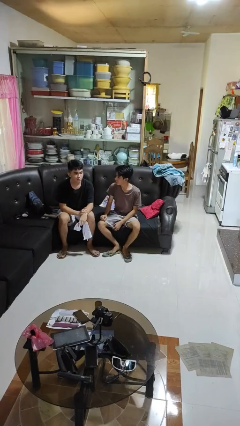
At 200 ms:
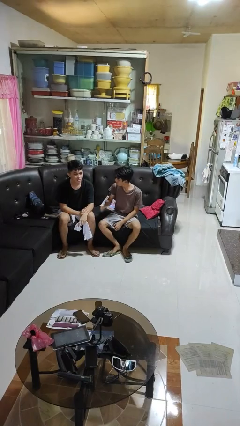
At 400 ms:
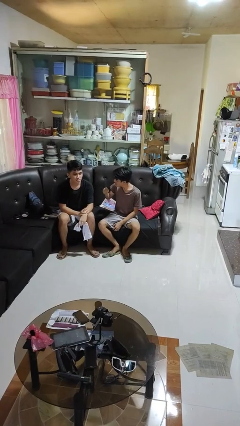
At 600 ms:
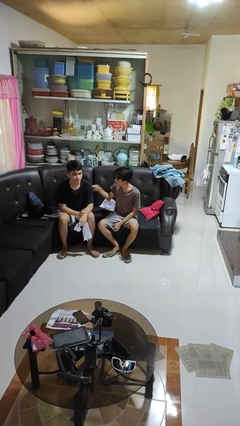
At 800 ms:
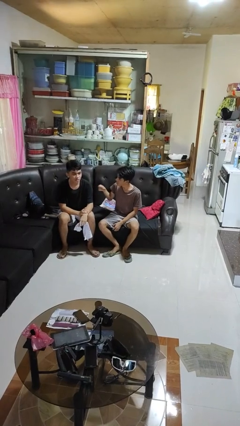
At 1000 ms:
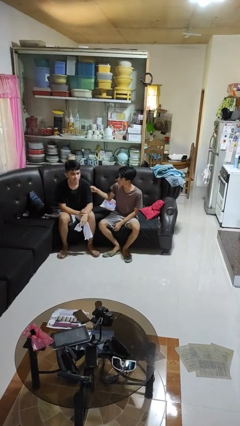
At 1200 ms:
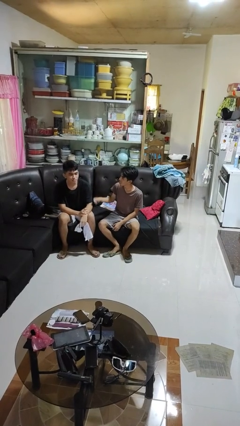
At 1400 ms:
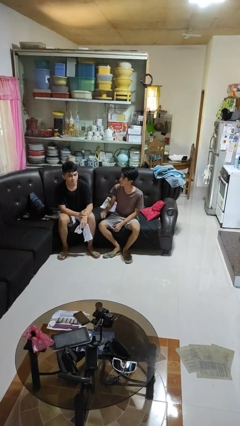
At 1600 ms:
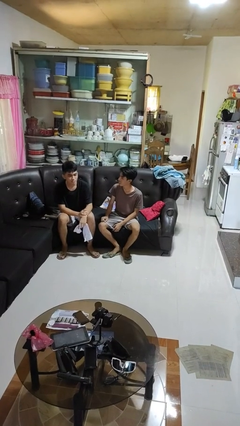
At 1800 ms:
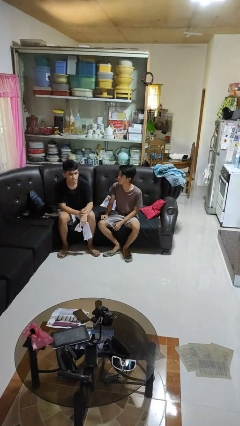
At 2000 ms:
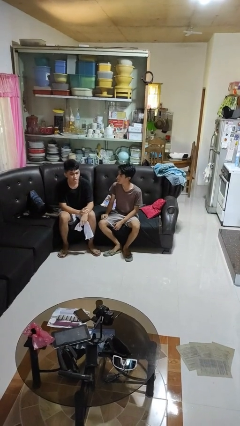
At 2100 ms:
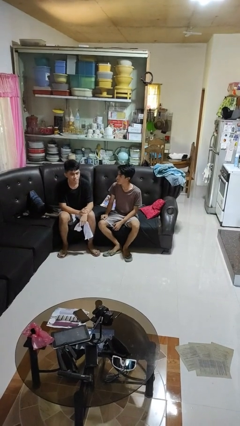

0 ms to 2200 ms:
person pounds shoulders of person

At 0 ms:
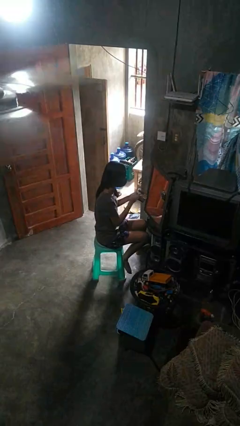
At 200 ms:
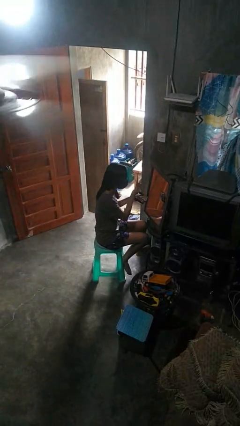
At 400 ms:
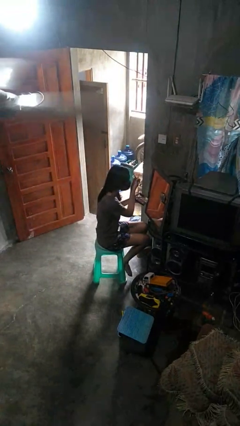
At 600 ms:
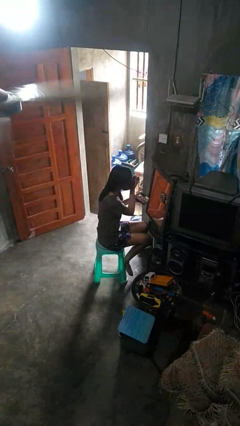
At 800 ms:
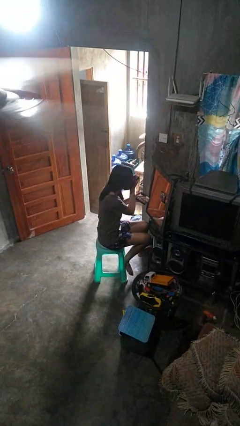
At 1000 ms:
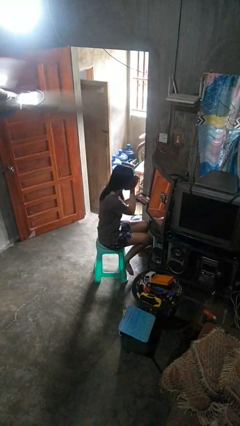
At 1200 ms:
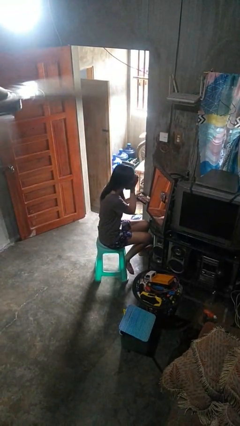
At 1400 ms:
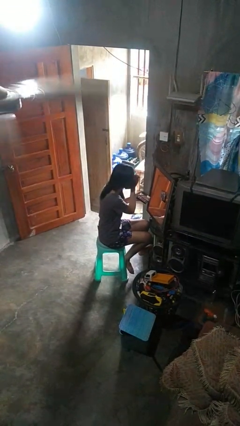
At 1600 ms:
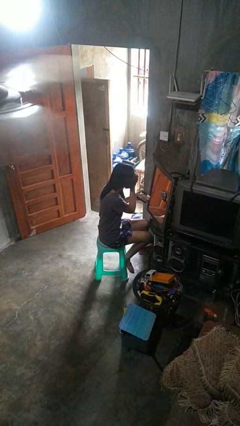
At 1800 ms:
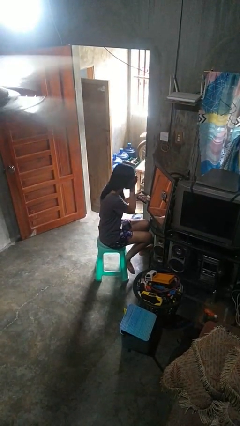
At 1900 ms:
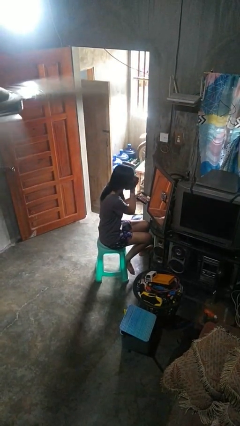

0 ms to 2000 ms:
person applies eye makeup

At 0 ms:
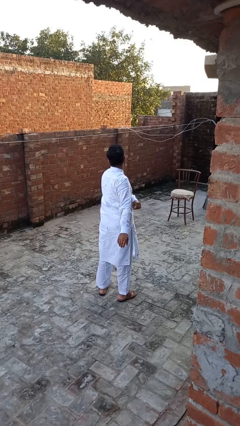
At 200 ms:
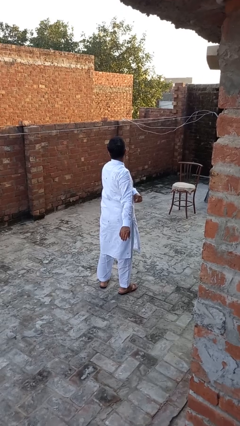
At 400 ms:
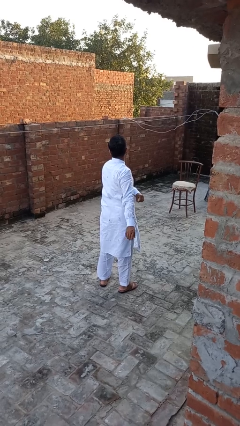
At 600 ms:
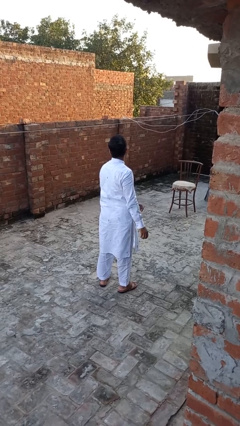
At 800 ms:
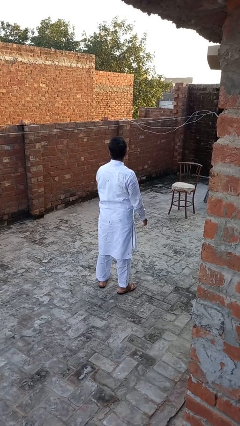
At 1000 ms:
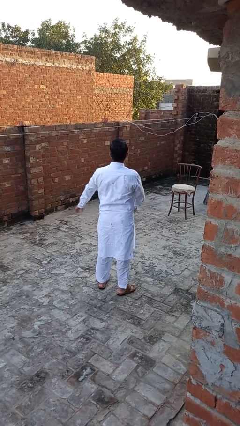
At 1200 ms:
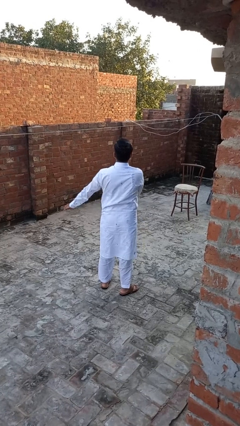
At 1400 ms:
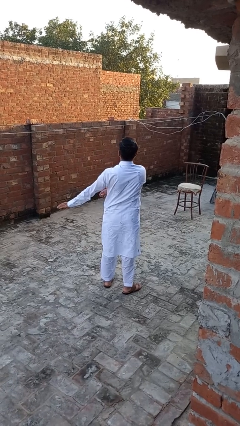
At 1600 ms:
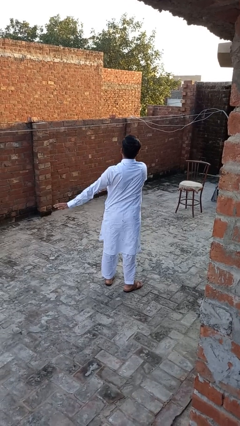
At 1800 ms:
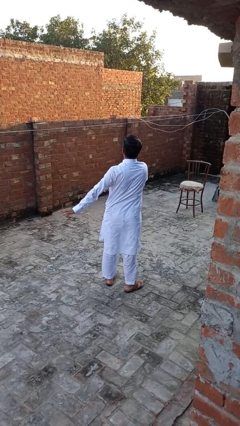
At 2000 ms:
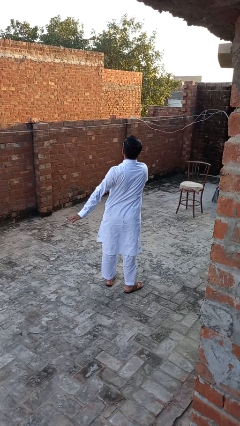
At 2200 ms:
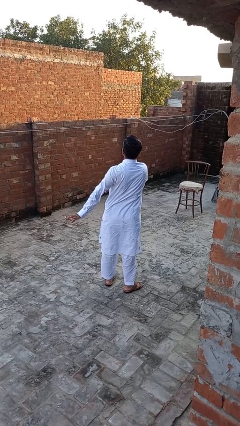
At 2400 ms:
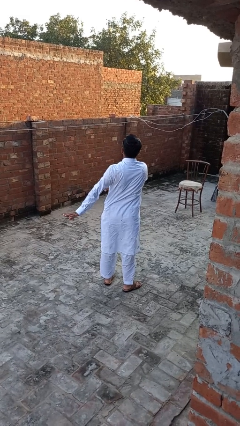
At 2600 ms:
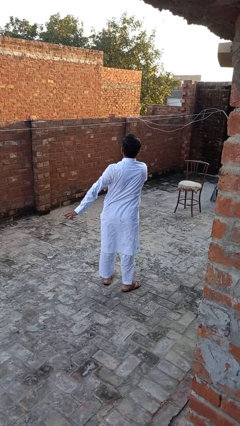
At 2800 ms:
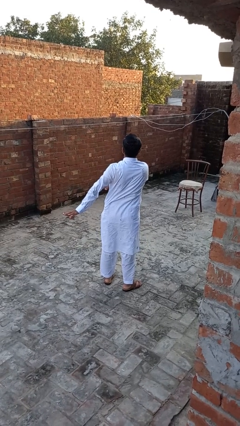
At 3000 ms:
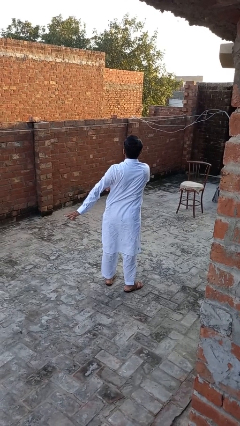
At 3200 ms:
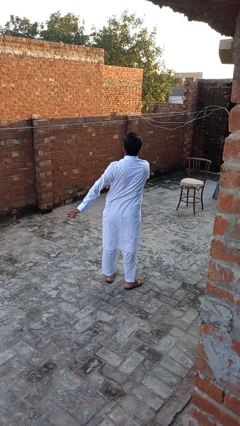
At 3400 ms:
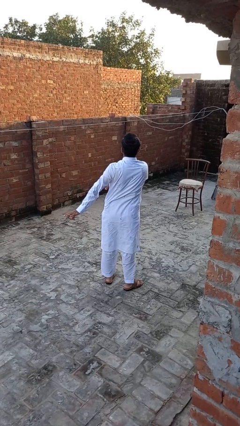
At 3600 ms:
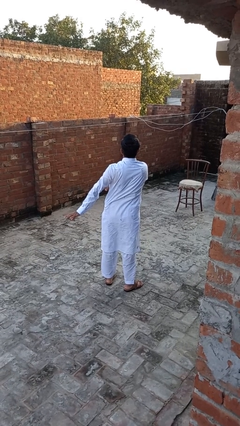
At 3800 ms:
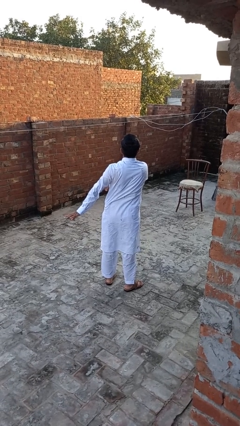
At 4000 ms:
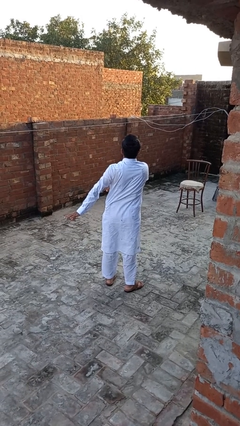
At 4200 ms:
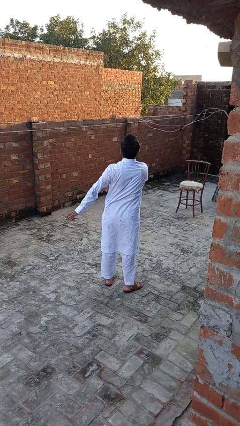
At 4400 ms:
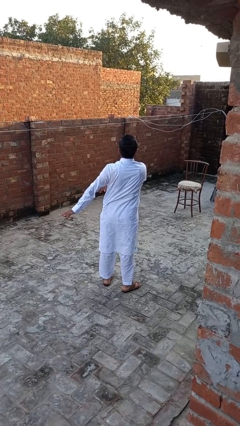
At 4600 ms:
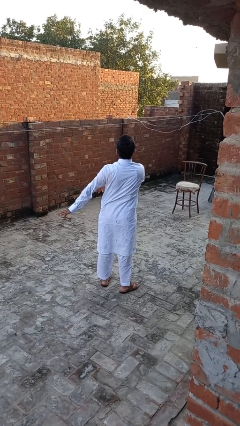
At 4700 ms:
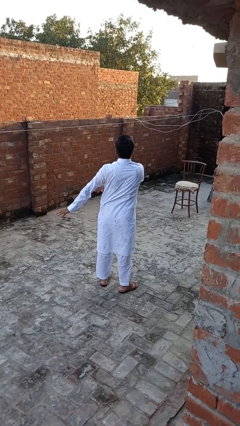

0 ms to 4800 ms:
person gestures swipe left

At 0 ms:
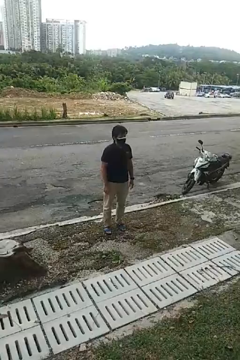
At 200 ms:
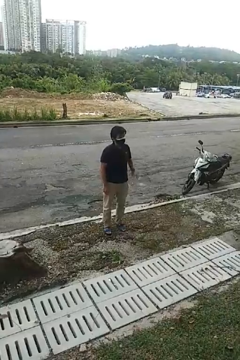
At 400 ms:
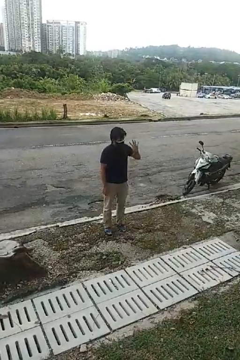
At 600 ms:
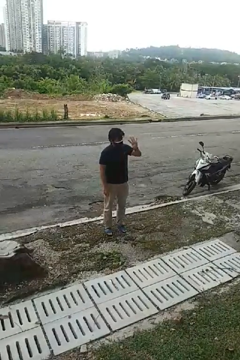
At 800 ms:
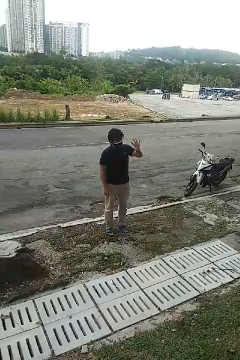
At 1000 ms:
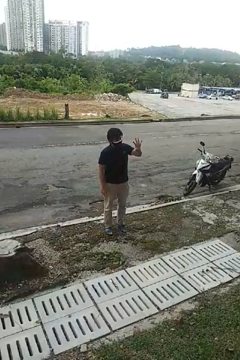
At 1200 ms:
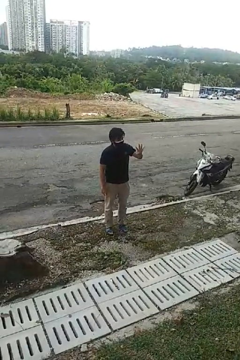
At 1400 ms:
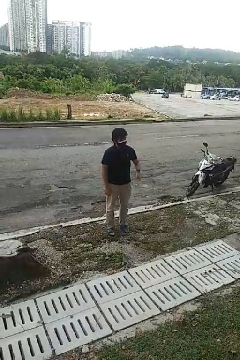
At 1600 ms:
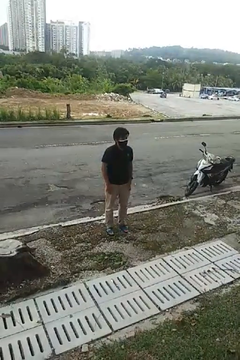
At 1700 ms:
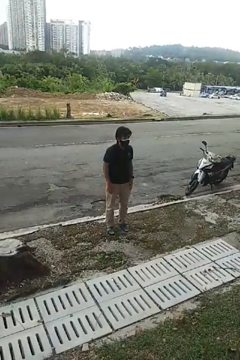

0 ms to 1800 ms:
person gestures number four

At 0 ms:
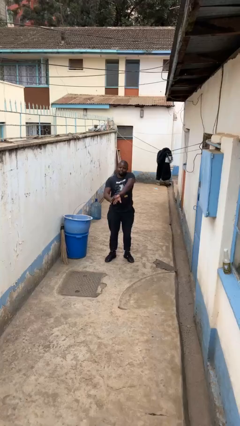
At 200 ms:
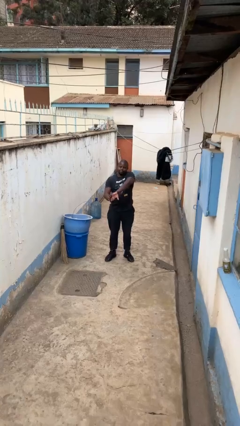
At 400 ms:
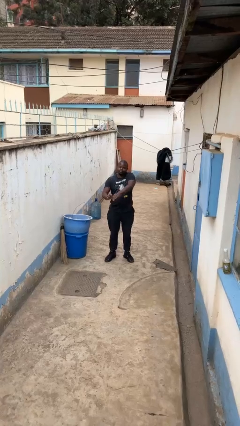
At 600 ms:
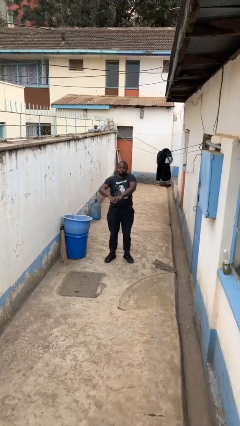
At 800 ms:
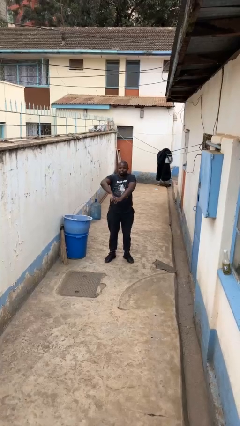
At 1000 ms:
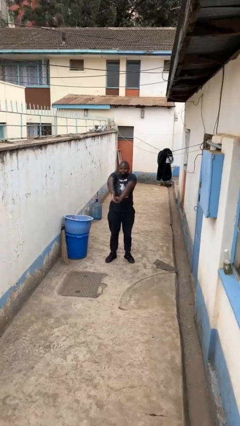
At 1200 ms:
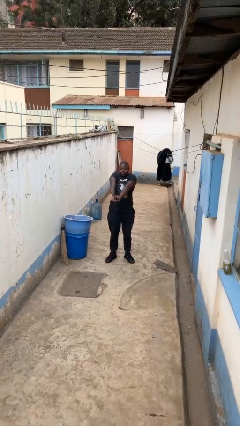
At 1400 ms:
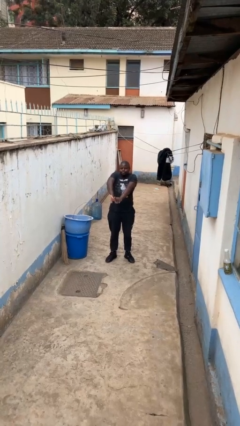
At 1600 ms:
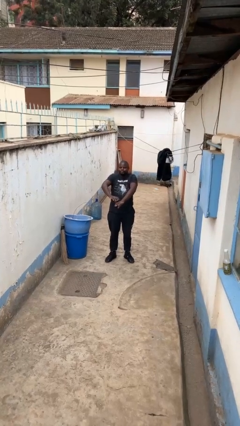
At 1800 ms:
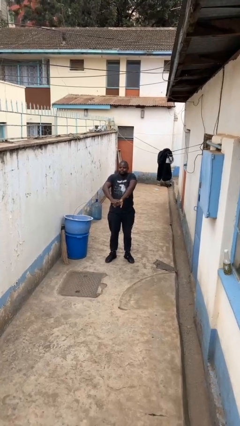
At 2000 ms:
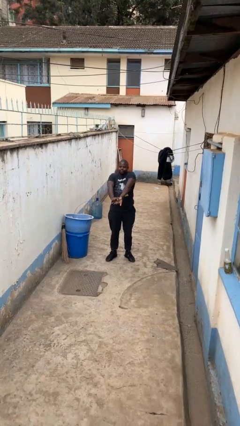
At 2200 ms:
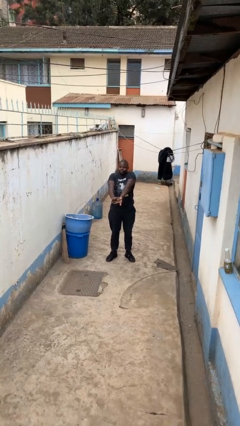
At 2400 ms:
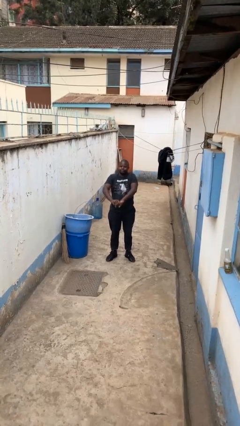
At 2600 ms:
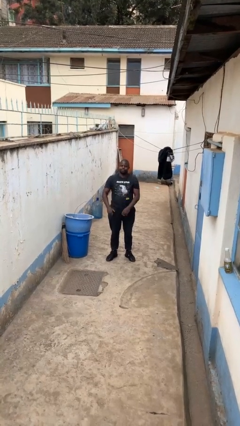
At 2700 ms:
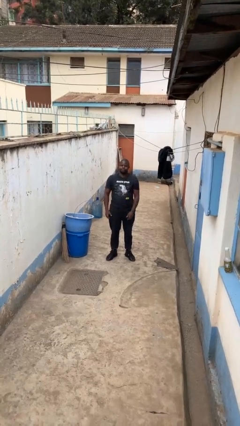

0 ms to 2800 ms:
person cracks knuckles

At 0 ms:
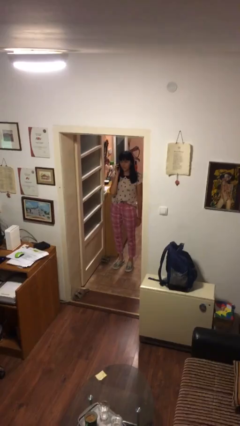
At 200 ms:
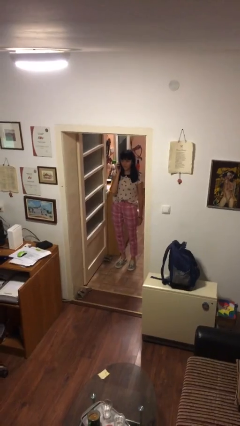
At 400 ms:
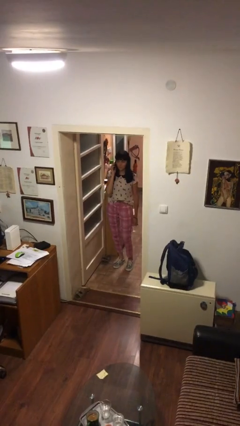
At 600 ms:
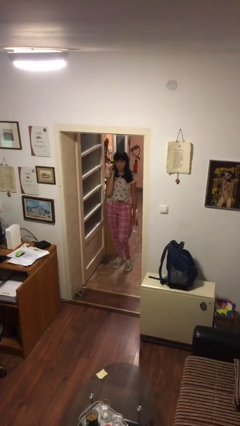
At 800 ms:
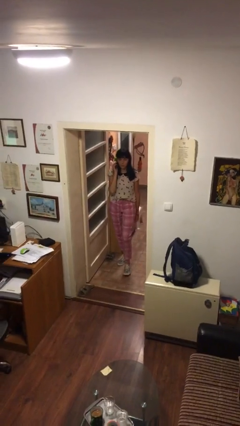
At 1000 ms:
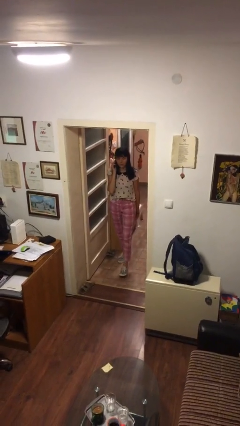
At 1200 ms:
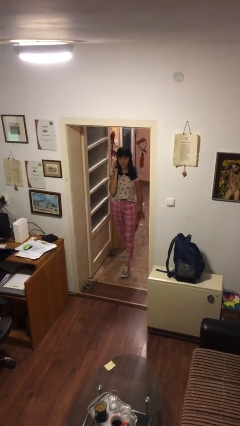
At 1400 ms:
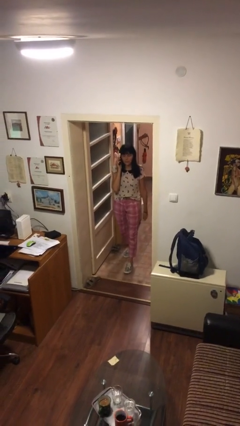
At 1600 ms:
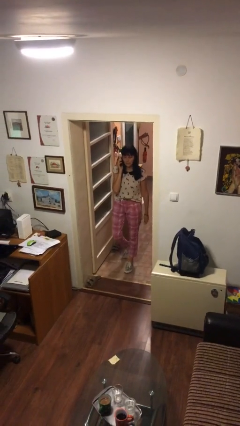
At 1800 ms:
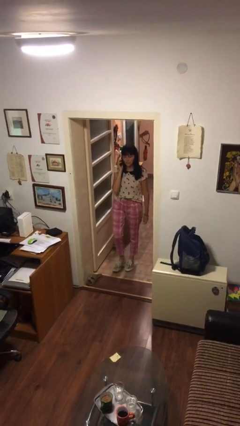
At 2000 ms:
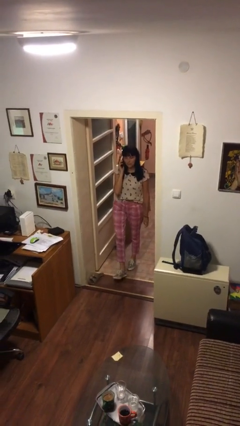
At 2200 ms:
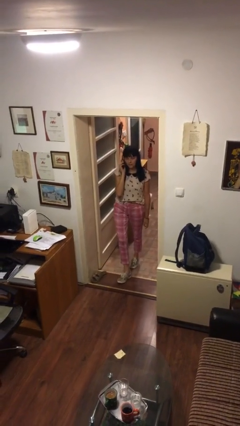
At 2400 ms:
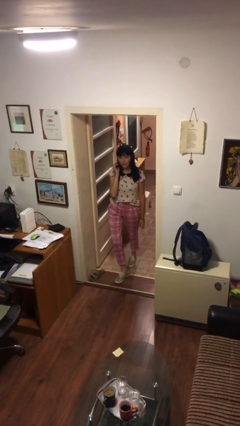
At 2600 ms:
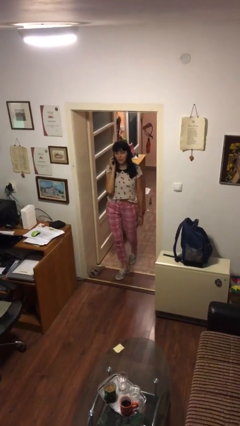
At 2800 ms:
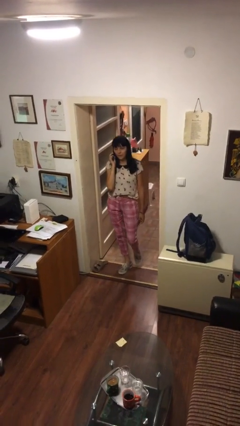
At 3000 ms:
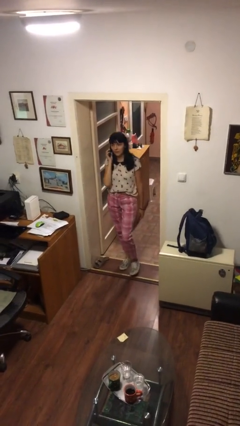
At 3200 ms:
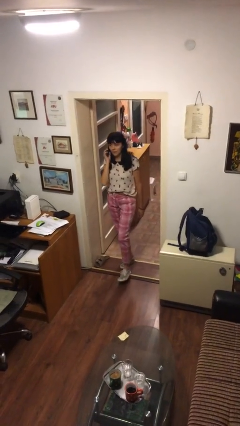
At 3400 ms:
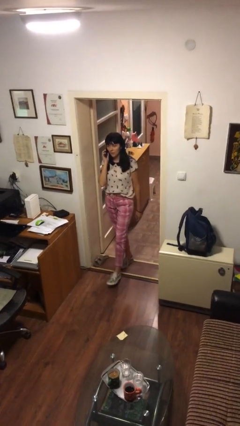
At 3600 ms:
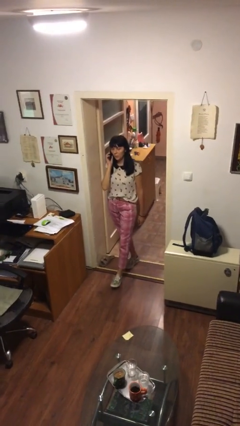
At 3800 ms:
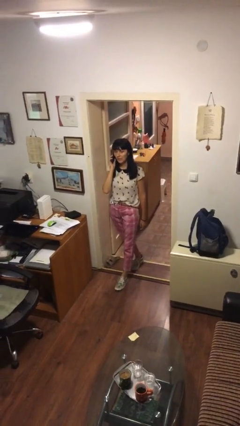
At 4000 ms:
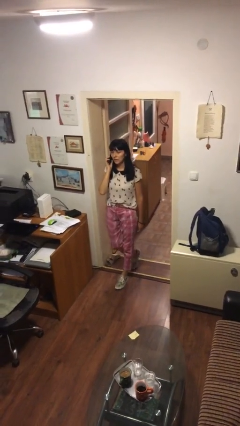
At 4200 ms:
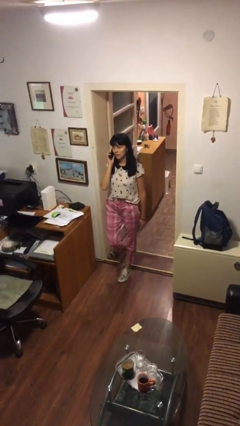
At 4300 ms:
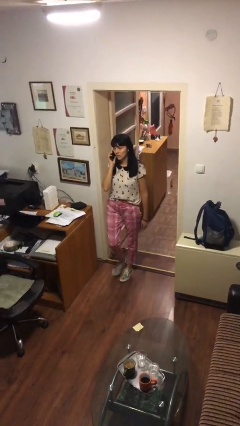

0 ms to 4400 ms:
person enters scene through structure
